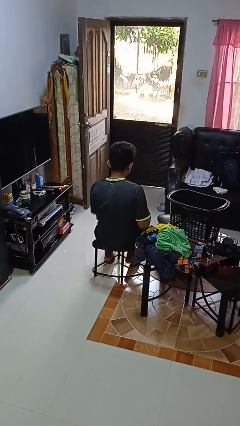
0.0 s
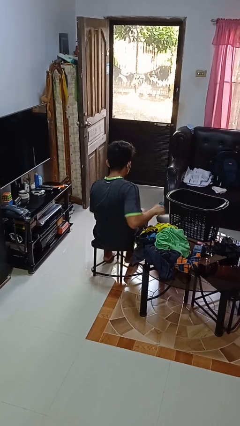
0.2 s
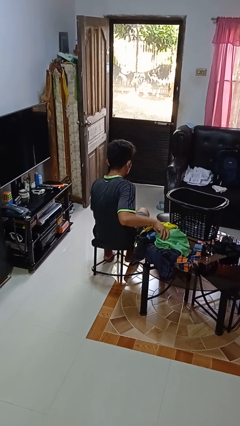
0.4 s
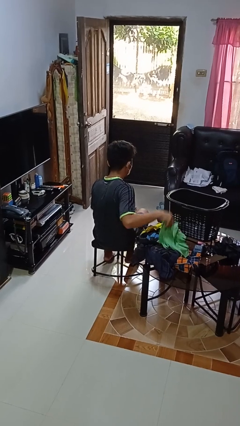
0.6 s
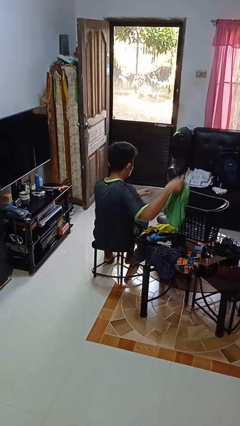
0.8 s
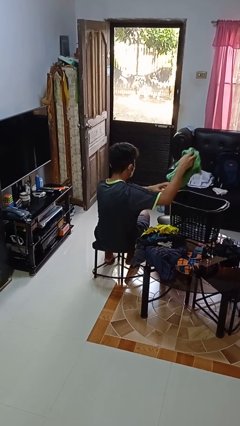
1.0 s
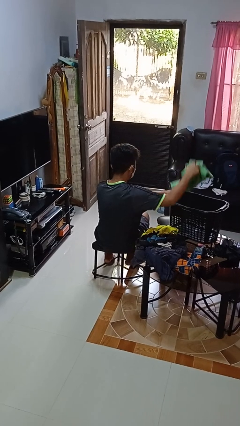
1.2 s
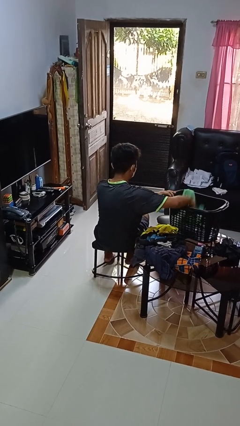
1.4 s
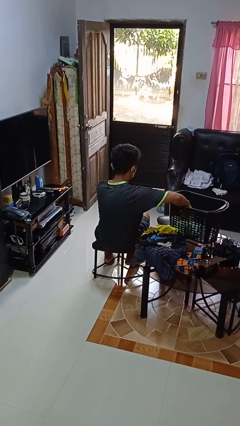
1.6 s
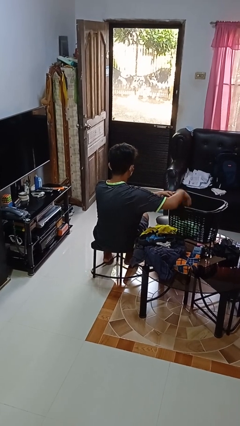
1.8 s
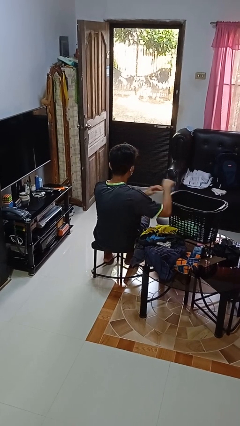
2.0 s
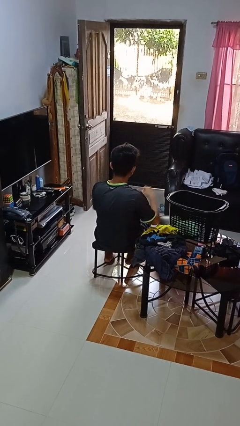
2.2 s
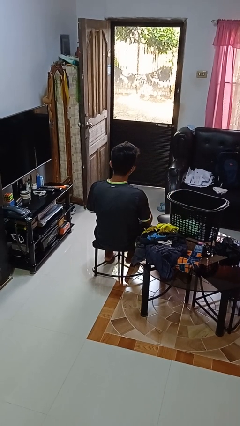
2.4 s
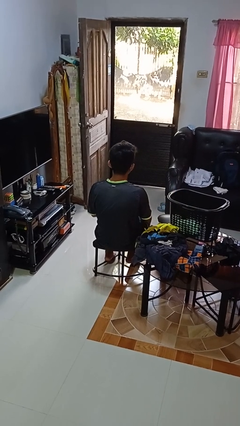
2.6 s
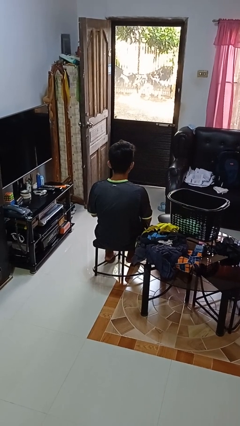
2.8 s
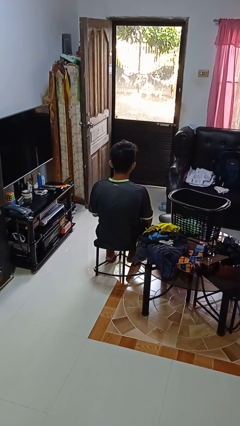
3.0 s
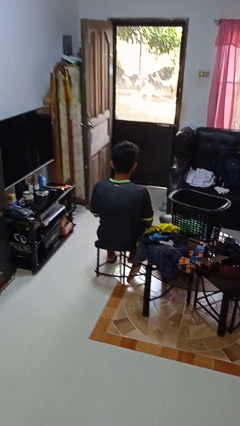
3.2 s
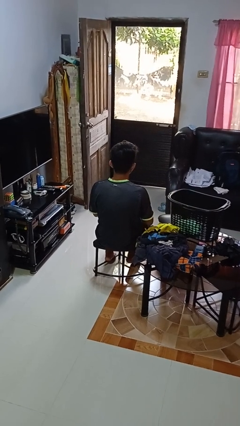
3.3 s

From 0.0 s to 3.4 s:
person puts object into basket

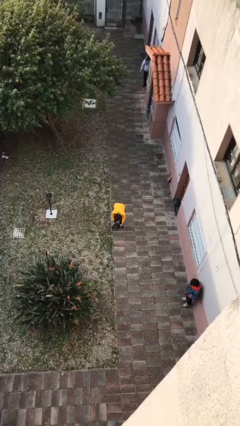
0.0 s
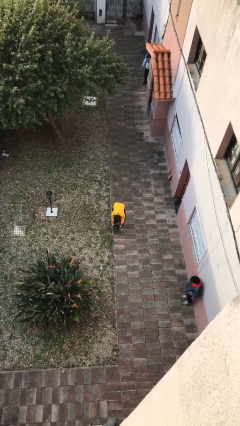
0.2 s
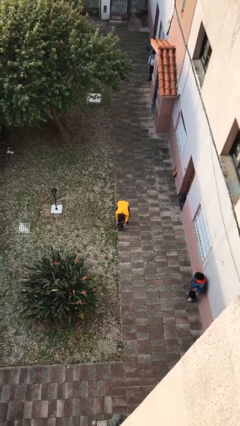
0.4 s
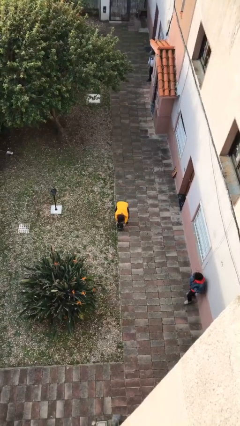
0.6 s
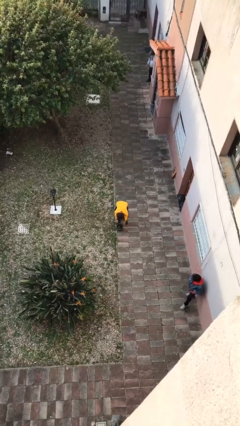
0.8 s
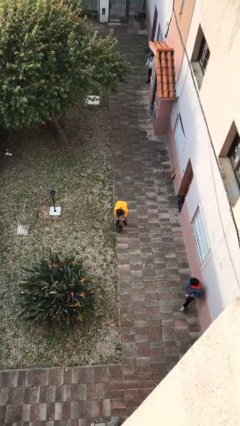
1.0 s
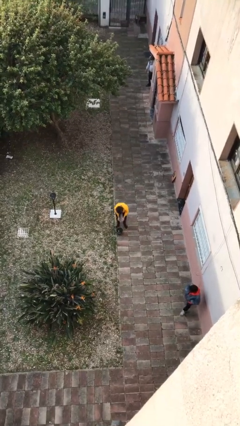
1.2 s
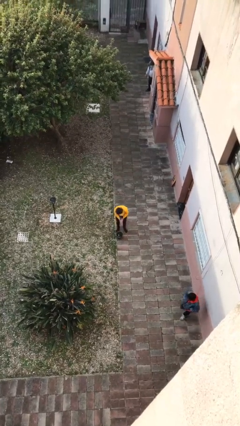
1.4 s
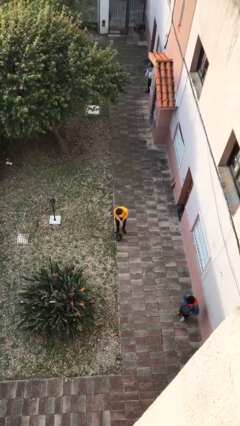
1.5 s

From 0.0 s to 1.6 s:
person puts down object on floor

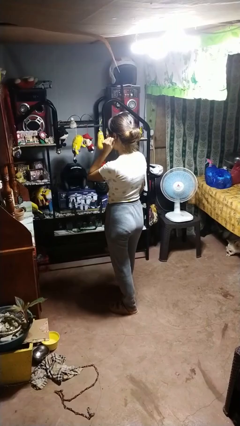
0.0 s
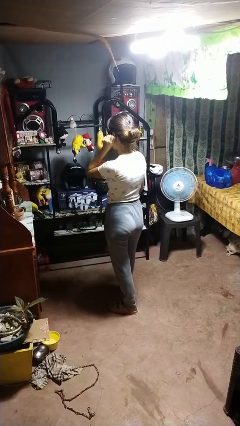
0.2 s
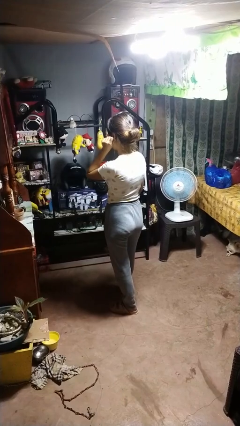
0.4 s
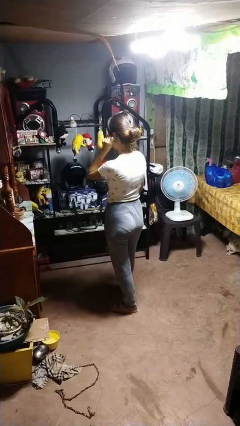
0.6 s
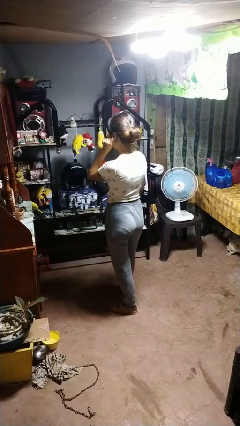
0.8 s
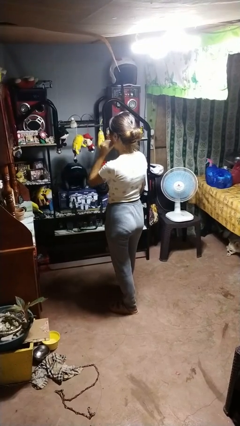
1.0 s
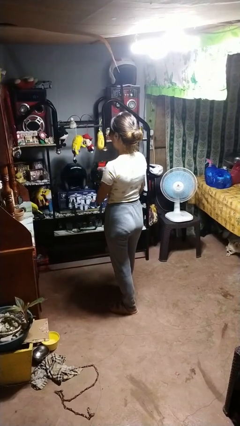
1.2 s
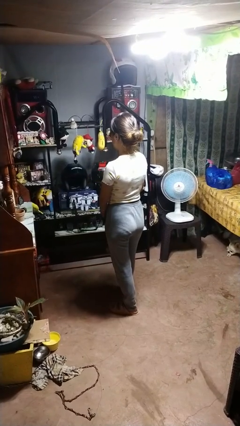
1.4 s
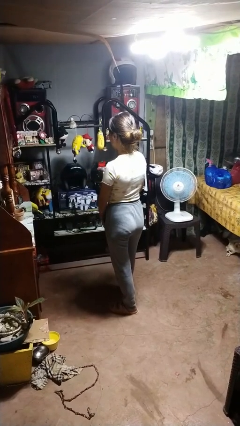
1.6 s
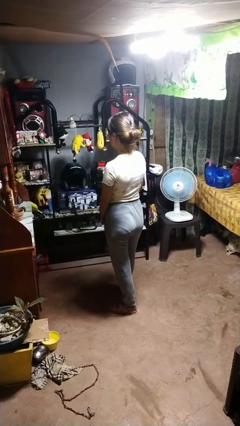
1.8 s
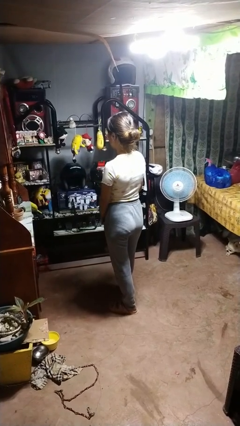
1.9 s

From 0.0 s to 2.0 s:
person touches earlobe

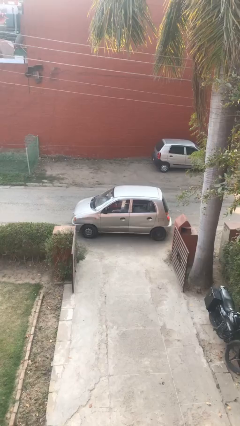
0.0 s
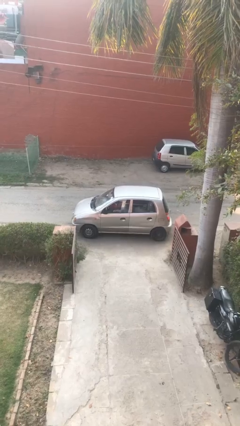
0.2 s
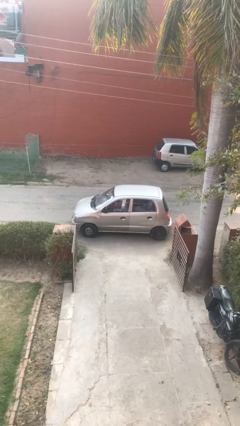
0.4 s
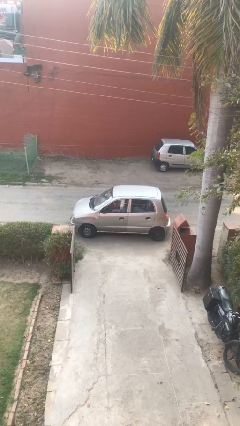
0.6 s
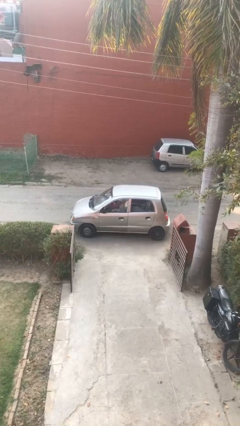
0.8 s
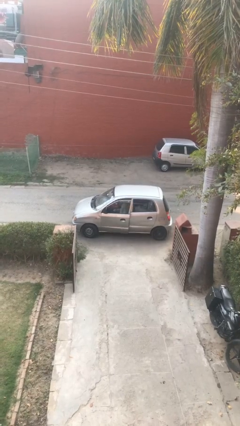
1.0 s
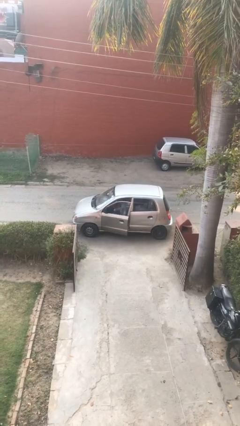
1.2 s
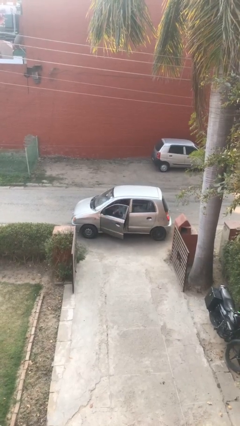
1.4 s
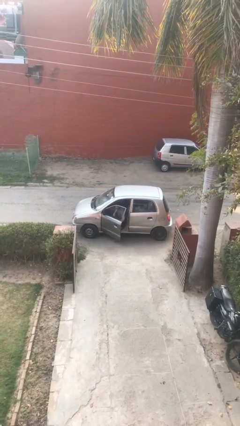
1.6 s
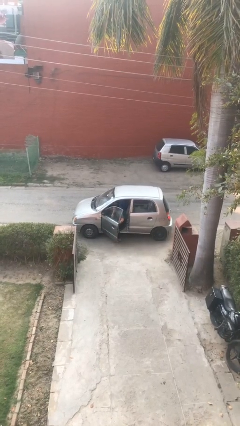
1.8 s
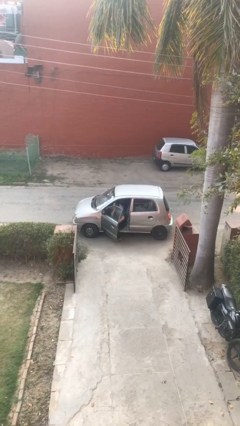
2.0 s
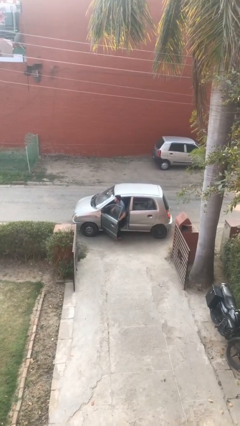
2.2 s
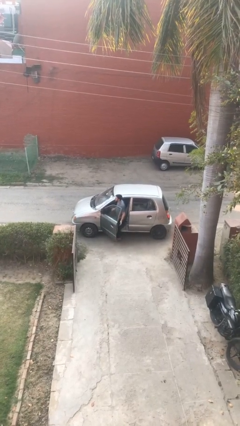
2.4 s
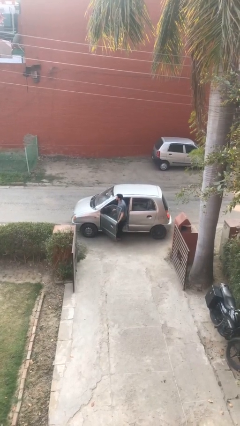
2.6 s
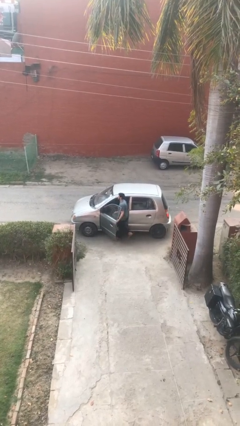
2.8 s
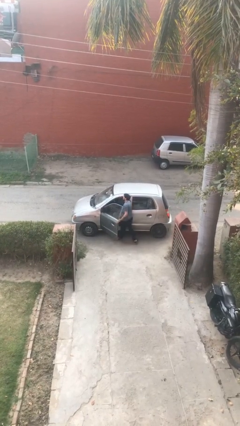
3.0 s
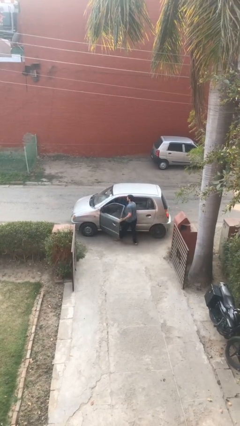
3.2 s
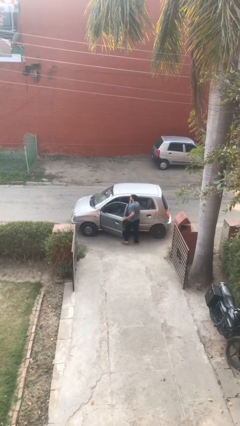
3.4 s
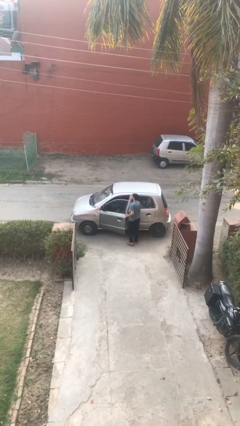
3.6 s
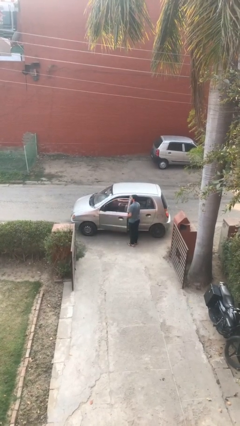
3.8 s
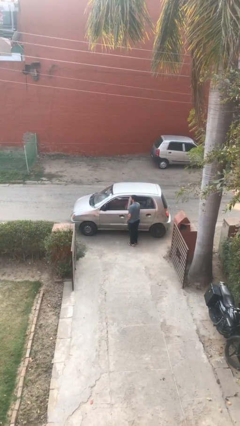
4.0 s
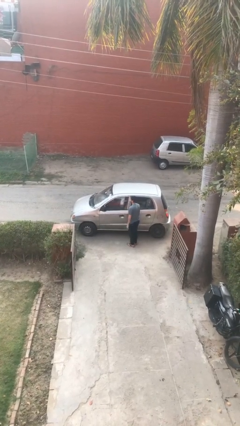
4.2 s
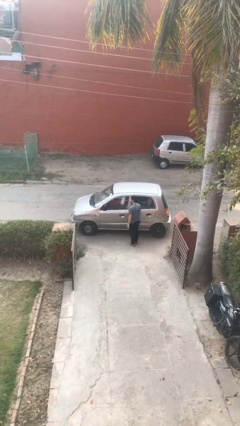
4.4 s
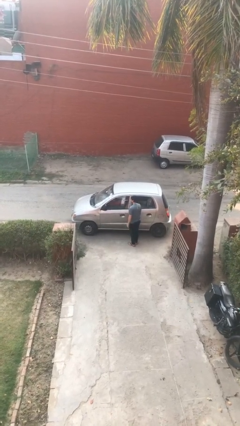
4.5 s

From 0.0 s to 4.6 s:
car drops off person

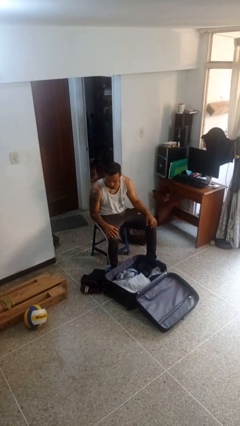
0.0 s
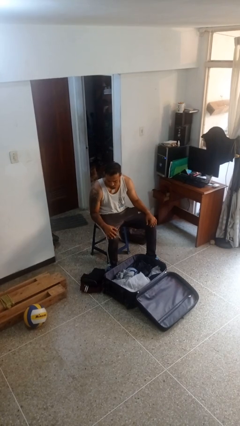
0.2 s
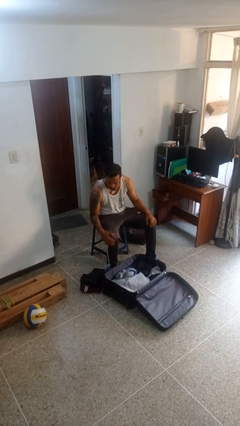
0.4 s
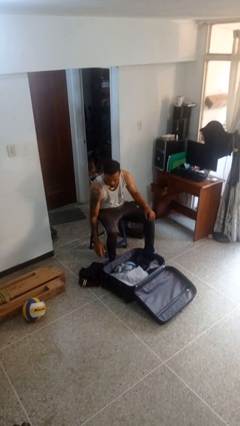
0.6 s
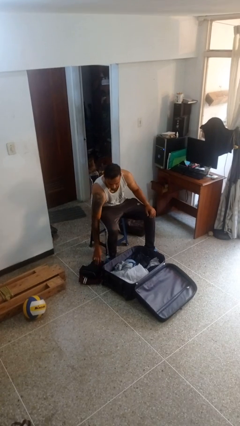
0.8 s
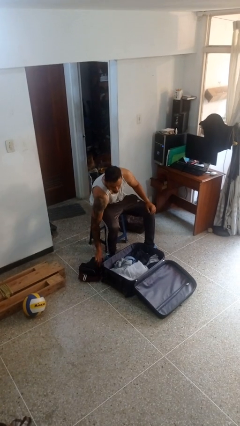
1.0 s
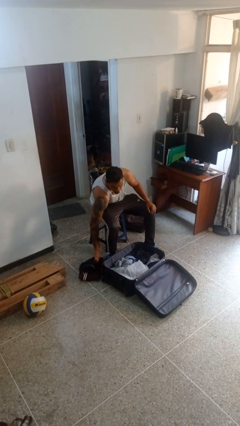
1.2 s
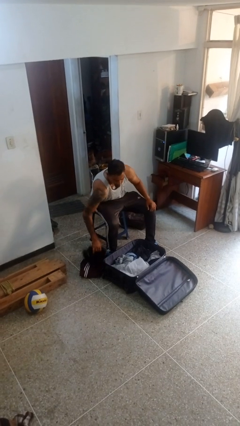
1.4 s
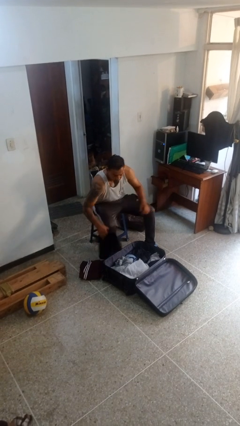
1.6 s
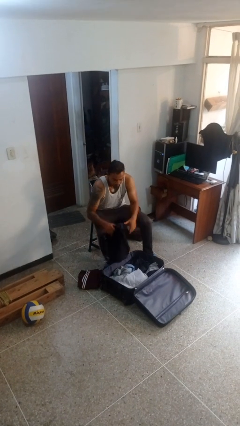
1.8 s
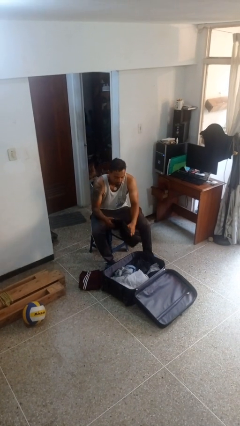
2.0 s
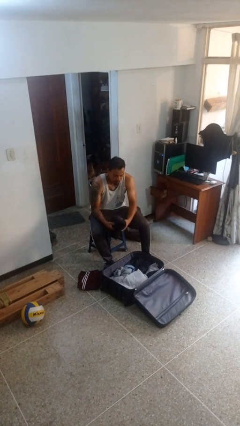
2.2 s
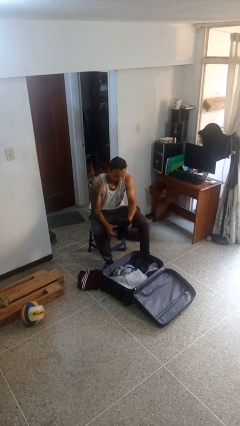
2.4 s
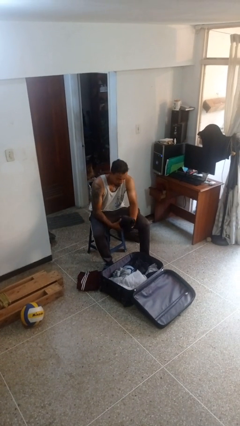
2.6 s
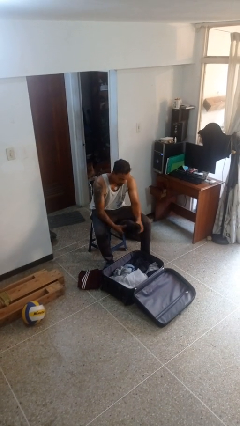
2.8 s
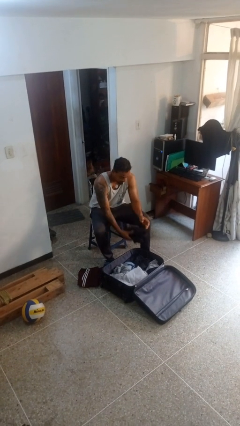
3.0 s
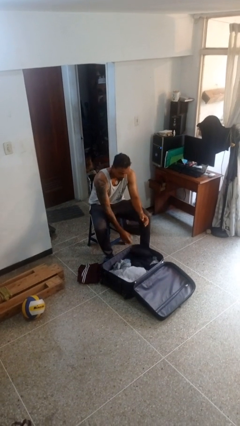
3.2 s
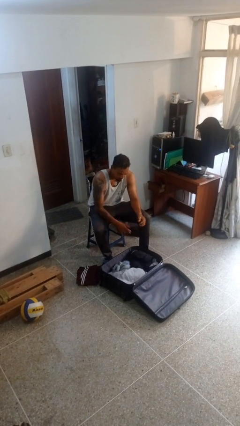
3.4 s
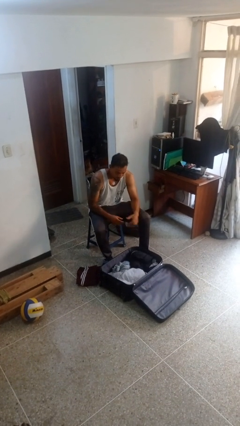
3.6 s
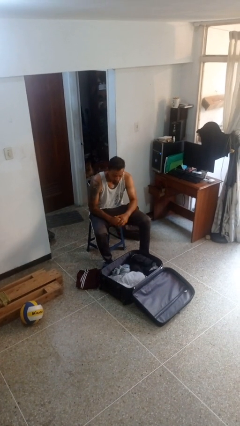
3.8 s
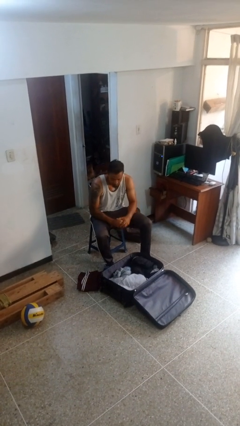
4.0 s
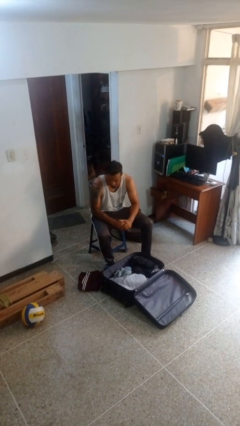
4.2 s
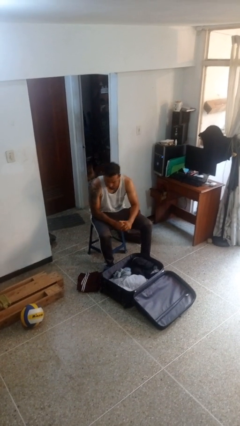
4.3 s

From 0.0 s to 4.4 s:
person loads clothes into suitcase

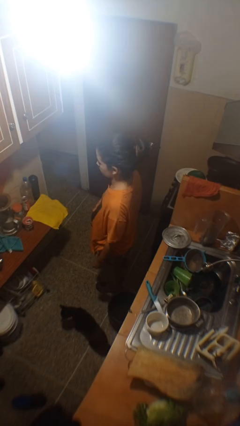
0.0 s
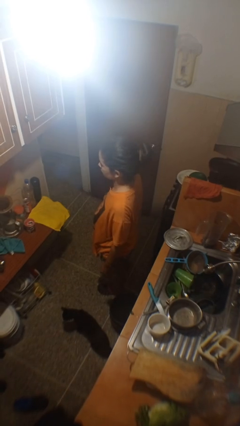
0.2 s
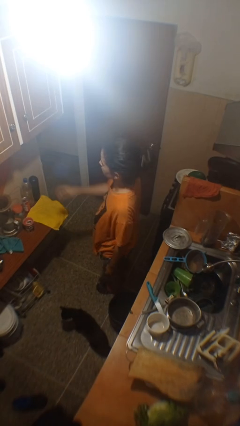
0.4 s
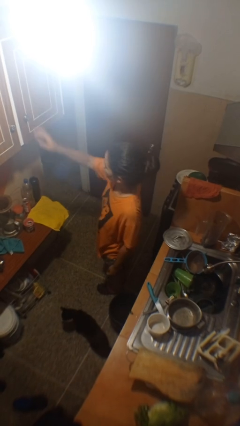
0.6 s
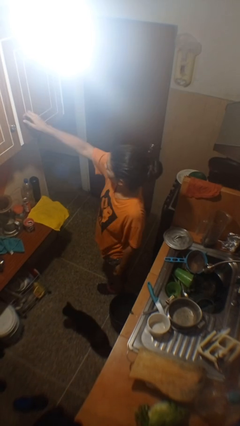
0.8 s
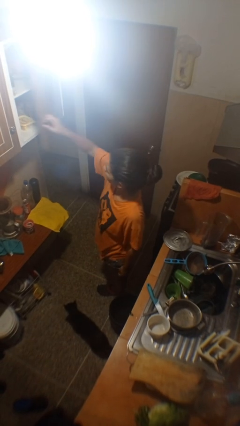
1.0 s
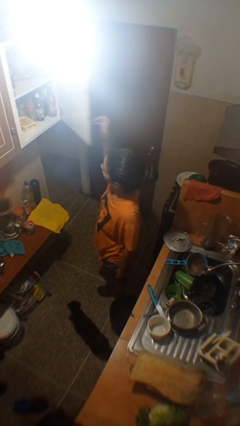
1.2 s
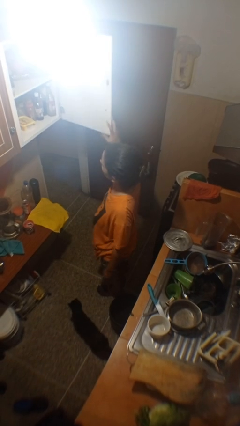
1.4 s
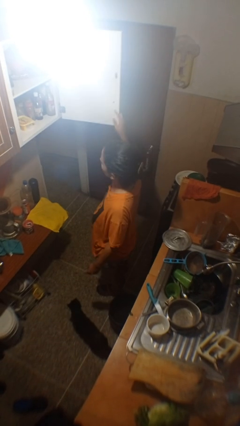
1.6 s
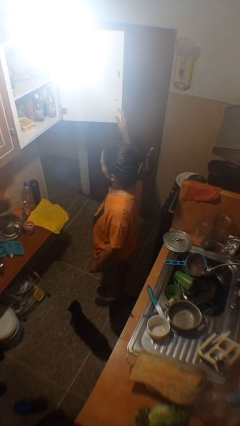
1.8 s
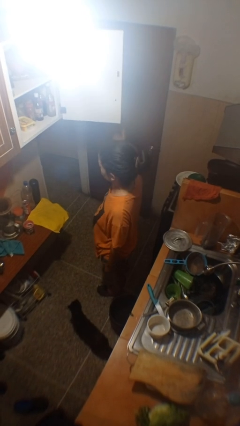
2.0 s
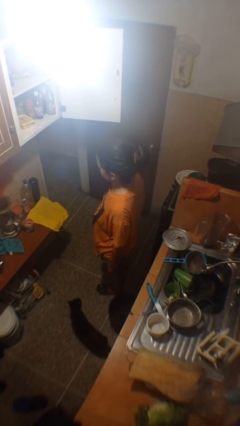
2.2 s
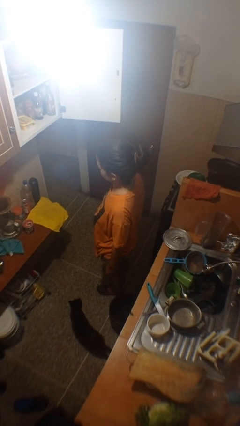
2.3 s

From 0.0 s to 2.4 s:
person opens cabinet
